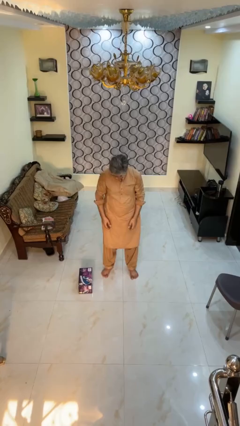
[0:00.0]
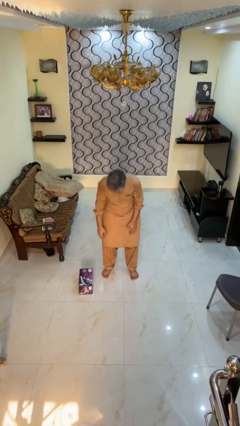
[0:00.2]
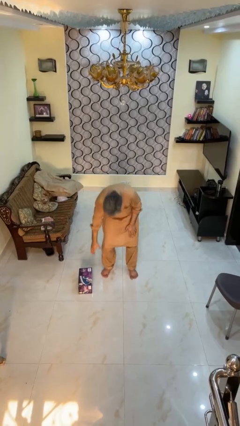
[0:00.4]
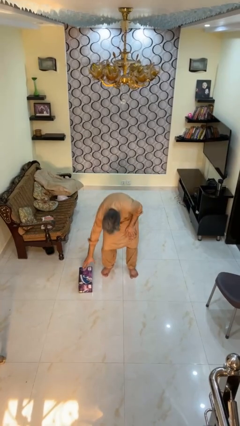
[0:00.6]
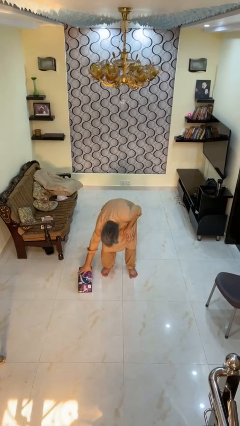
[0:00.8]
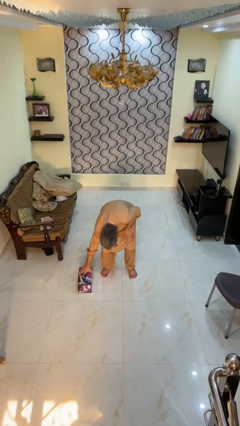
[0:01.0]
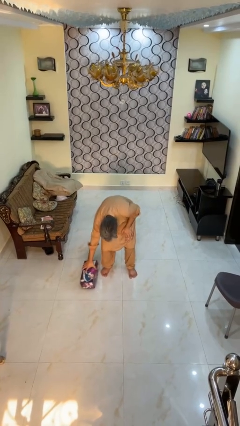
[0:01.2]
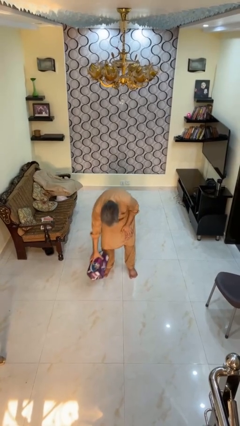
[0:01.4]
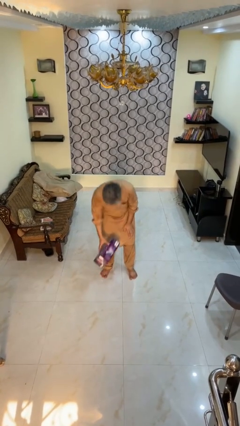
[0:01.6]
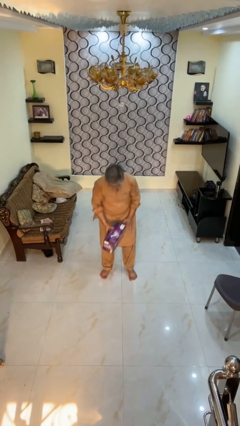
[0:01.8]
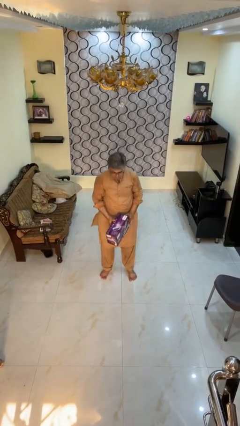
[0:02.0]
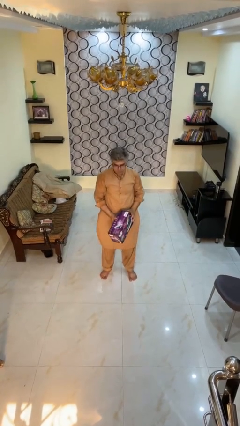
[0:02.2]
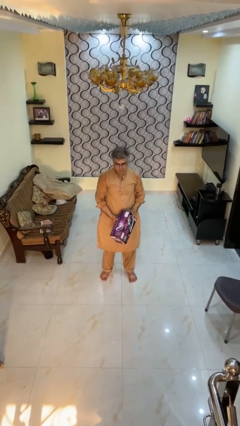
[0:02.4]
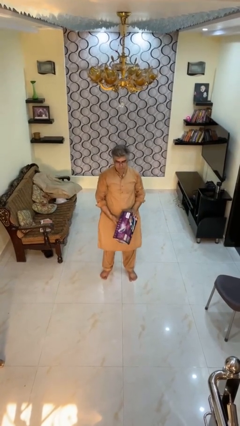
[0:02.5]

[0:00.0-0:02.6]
person picks up object from floor

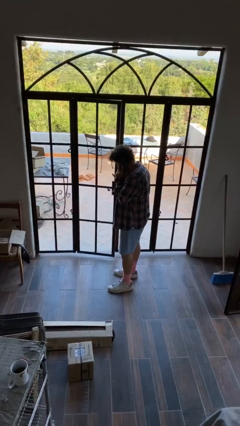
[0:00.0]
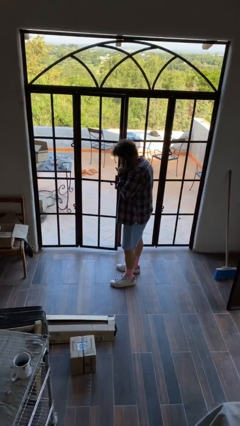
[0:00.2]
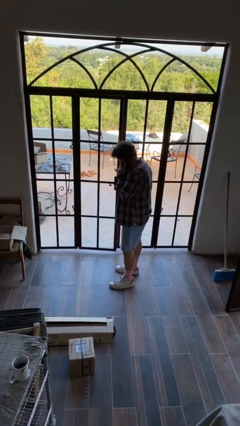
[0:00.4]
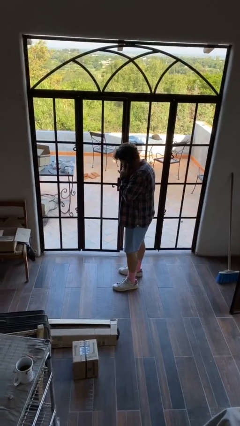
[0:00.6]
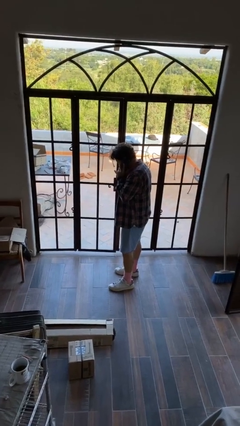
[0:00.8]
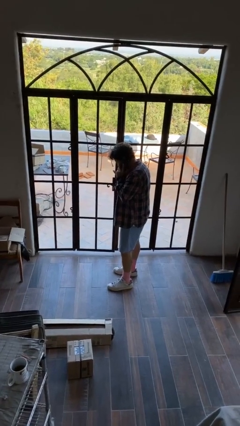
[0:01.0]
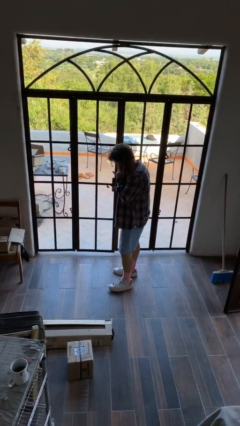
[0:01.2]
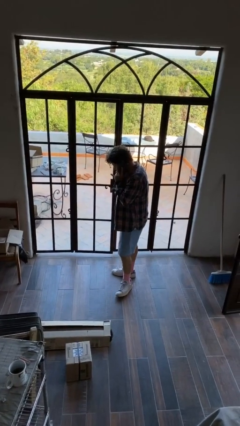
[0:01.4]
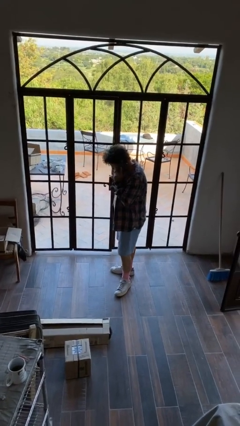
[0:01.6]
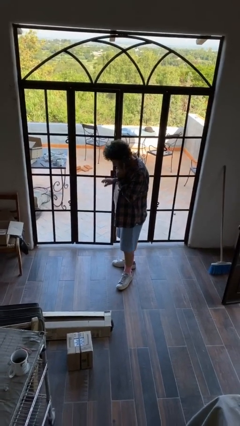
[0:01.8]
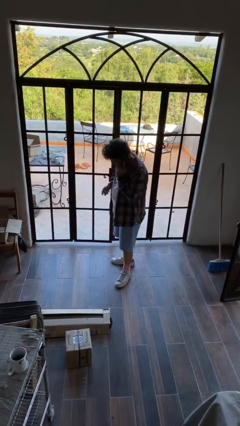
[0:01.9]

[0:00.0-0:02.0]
person closes facility door

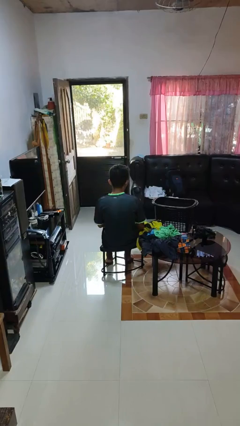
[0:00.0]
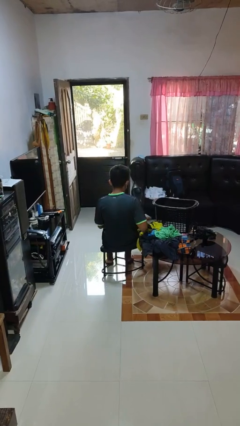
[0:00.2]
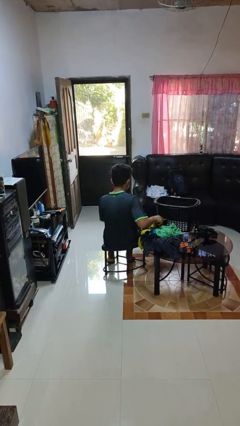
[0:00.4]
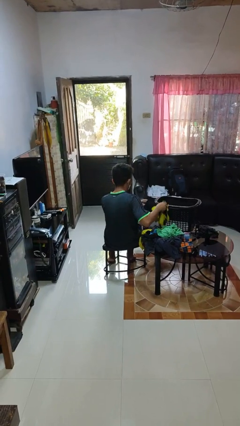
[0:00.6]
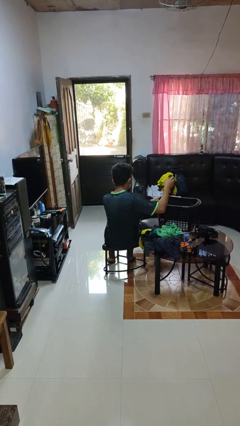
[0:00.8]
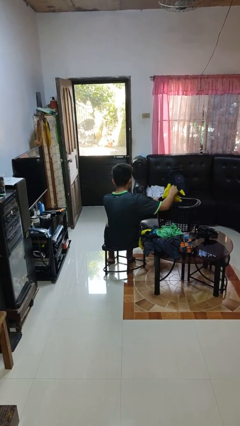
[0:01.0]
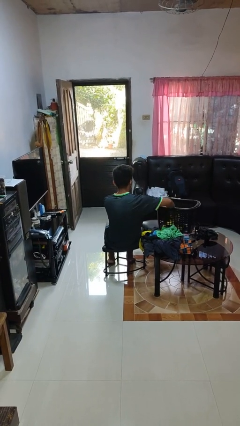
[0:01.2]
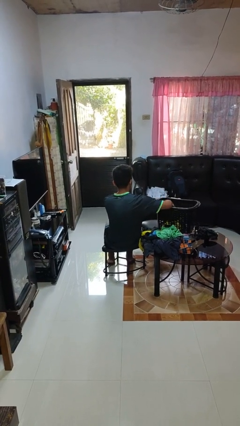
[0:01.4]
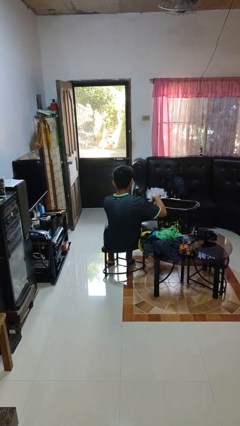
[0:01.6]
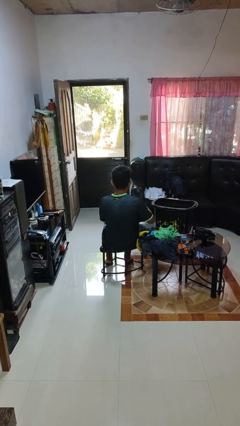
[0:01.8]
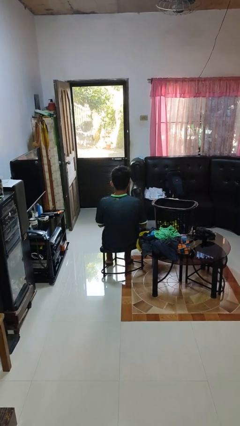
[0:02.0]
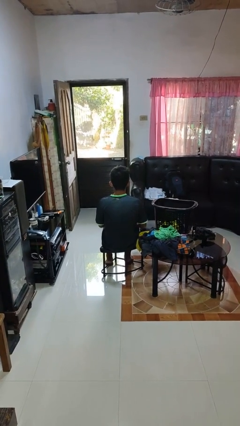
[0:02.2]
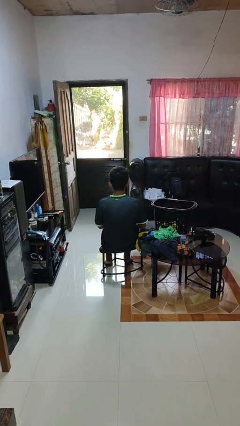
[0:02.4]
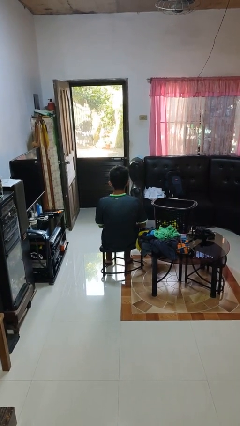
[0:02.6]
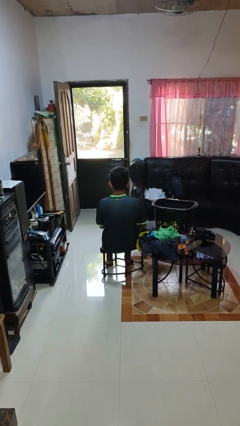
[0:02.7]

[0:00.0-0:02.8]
person puts object into basket

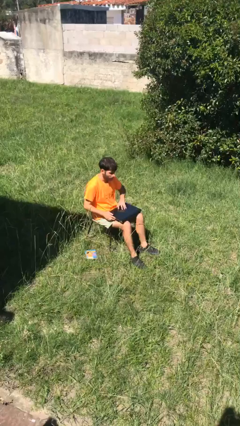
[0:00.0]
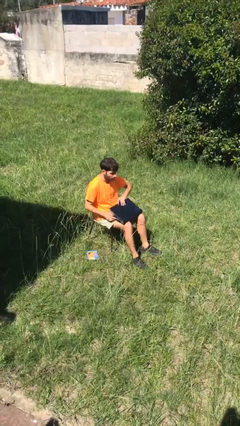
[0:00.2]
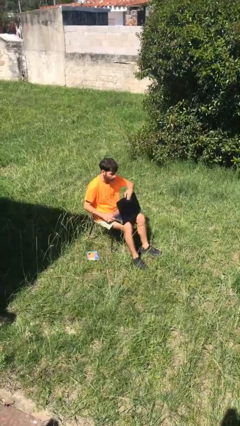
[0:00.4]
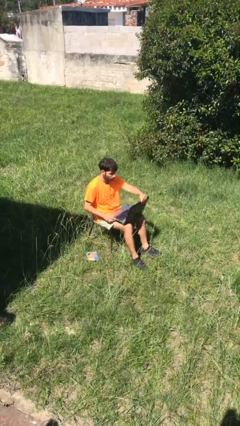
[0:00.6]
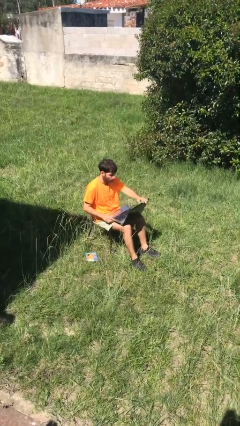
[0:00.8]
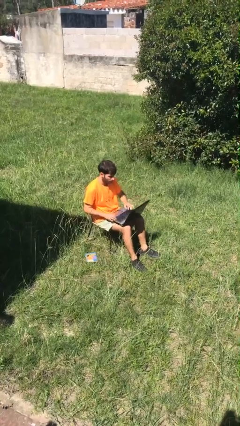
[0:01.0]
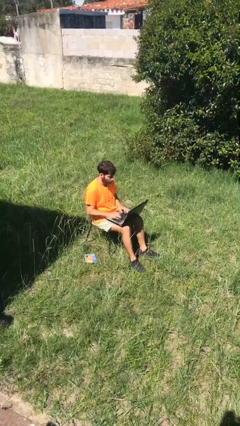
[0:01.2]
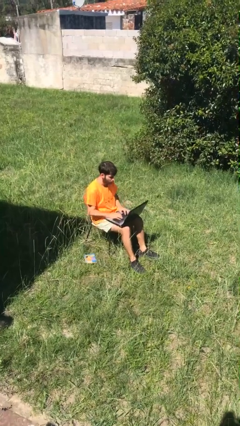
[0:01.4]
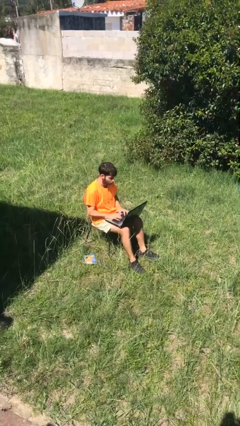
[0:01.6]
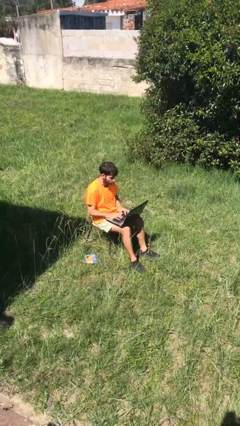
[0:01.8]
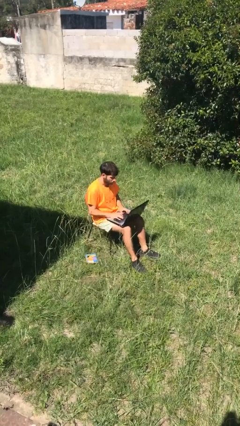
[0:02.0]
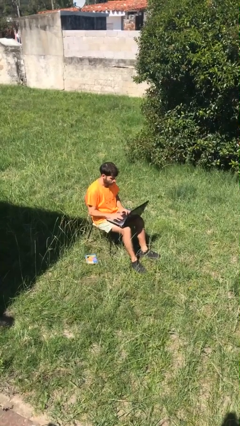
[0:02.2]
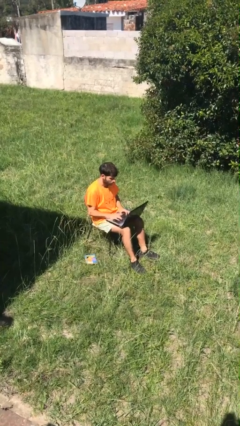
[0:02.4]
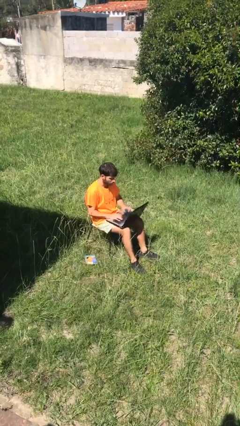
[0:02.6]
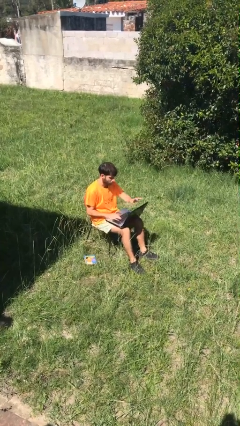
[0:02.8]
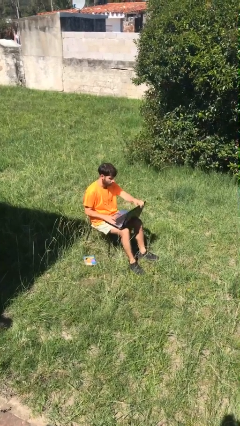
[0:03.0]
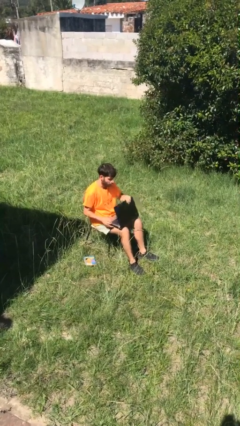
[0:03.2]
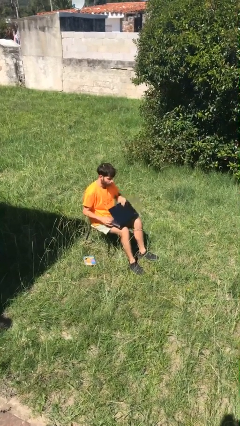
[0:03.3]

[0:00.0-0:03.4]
person interacts with laptop

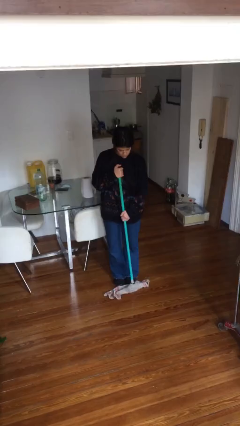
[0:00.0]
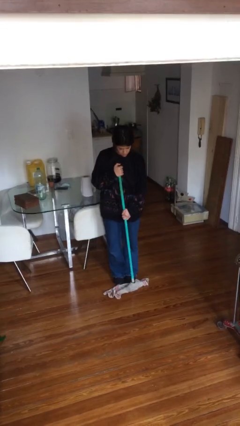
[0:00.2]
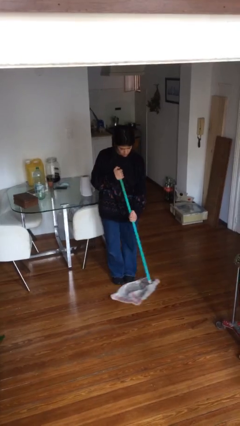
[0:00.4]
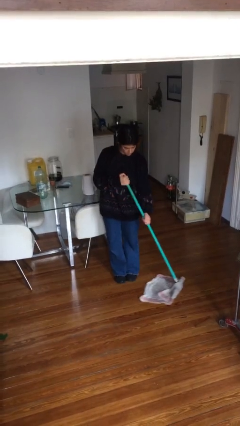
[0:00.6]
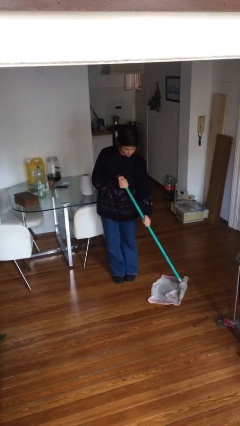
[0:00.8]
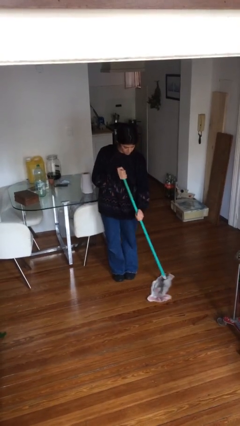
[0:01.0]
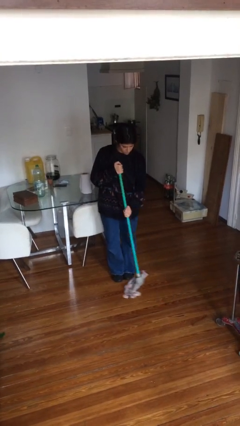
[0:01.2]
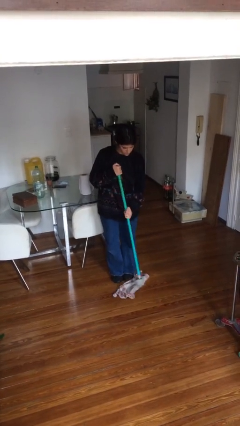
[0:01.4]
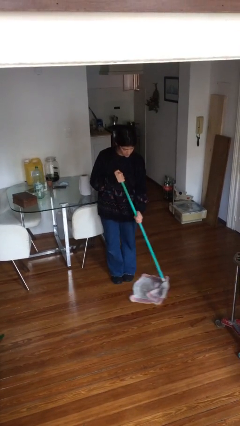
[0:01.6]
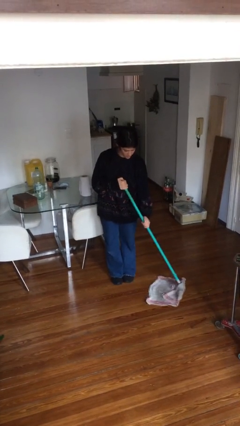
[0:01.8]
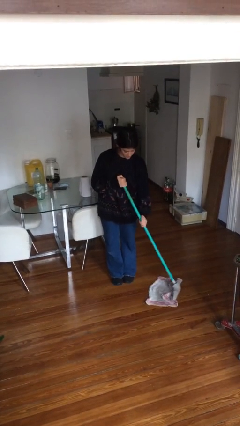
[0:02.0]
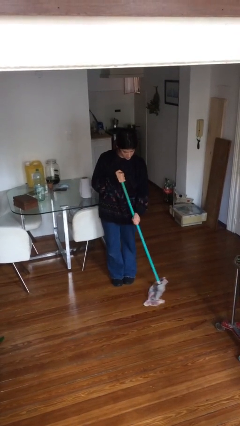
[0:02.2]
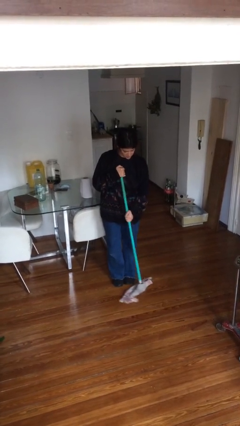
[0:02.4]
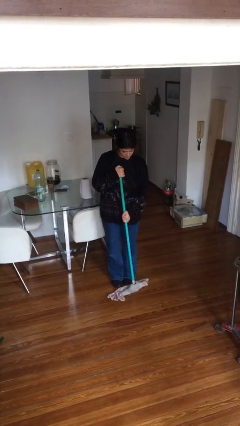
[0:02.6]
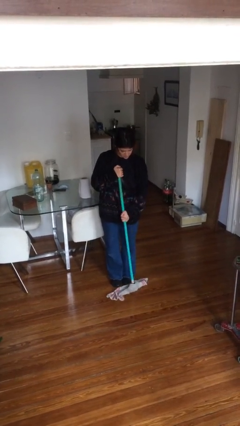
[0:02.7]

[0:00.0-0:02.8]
person mops

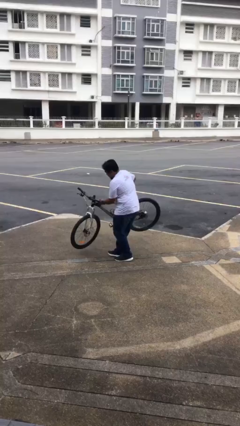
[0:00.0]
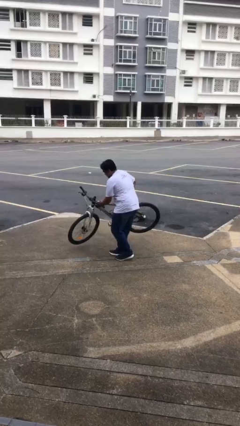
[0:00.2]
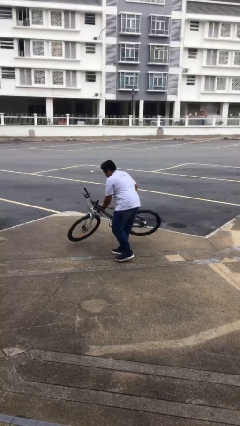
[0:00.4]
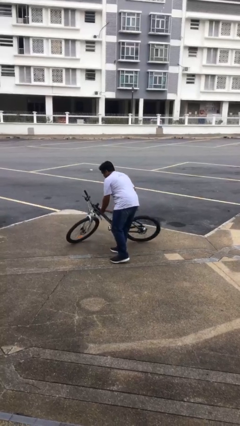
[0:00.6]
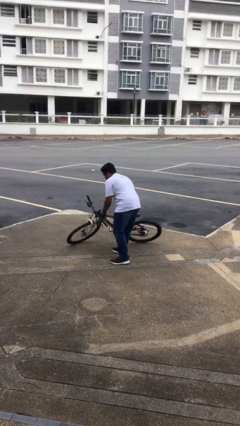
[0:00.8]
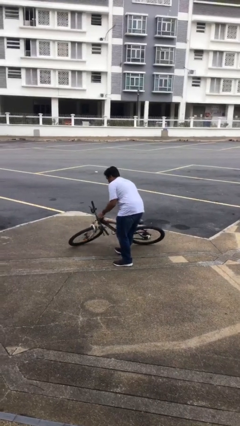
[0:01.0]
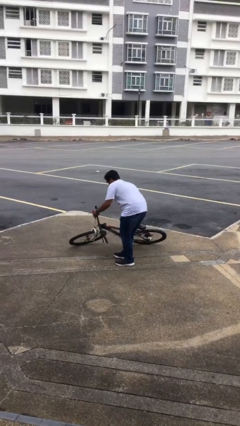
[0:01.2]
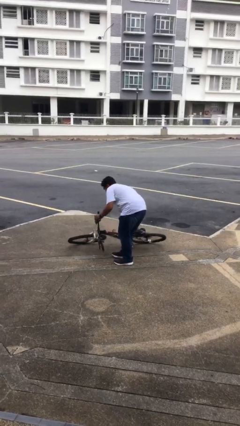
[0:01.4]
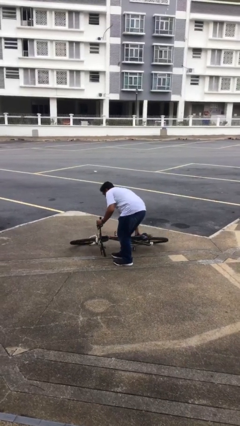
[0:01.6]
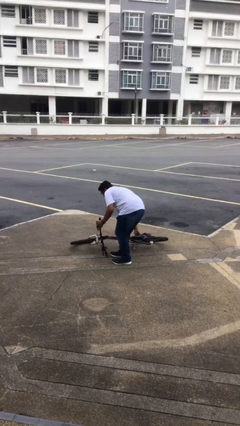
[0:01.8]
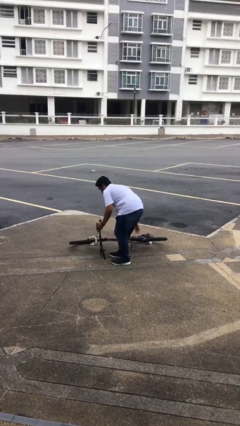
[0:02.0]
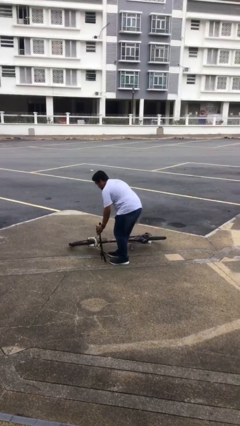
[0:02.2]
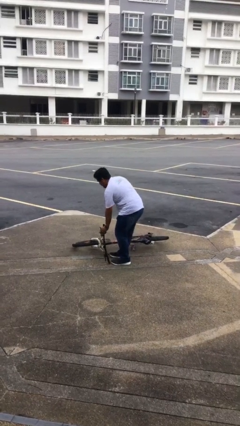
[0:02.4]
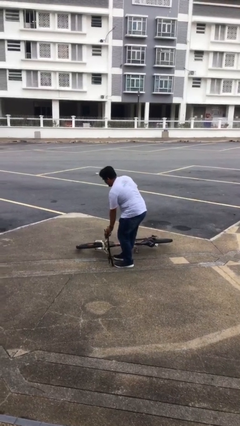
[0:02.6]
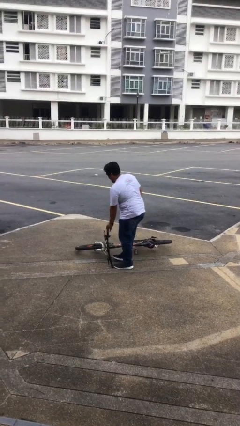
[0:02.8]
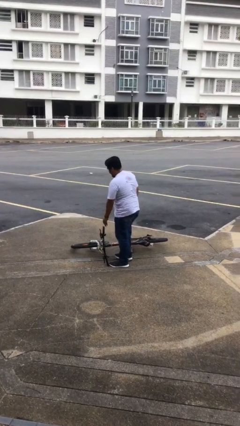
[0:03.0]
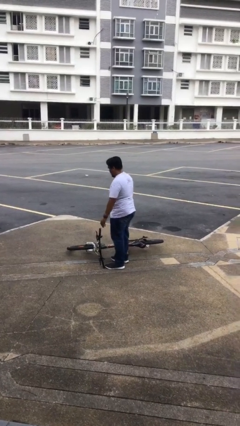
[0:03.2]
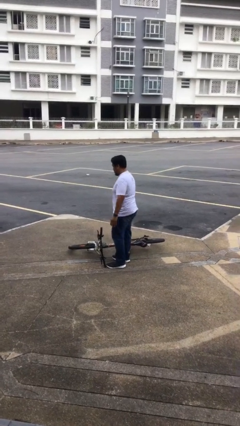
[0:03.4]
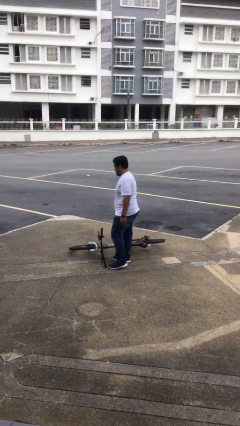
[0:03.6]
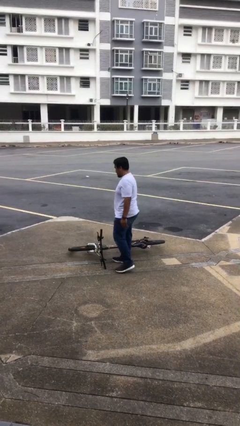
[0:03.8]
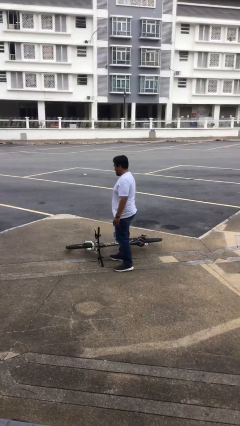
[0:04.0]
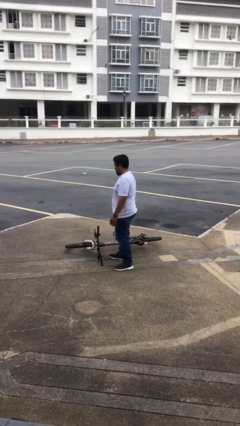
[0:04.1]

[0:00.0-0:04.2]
person puts down object on floor
